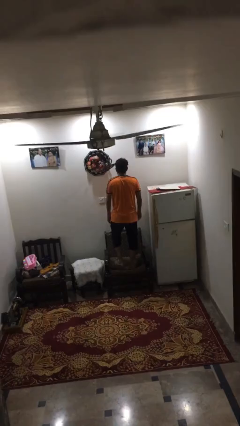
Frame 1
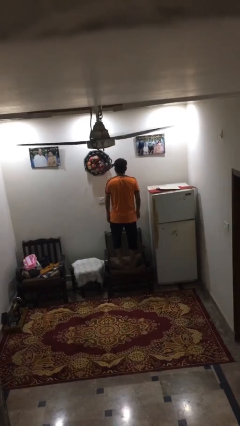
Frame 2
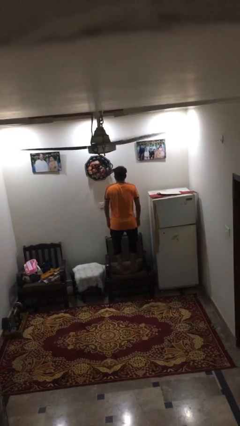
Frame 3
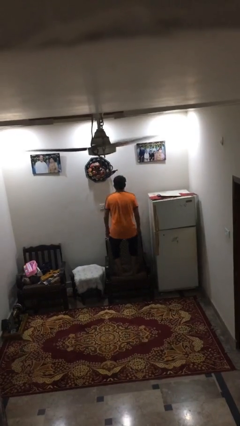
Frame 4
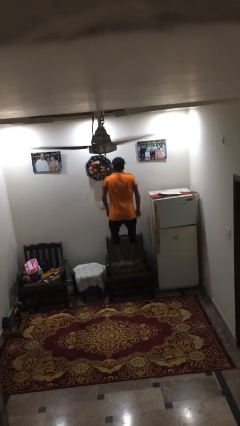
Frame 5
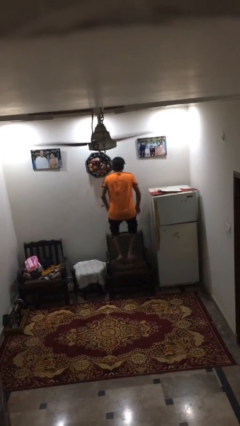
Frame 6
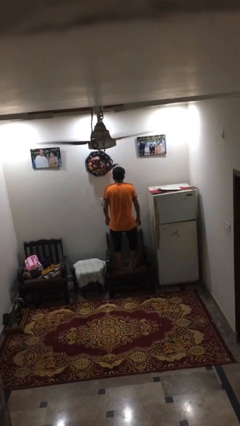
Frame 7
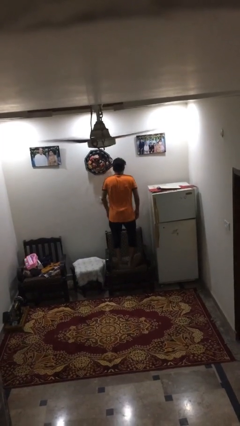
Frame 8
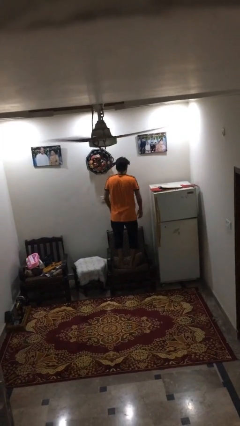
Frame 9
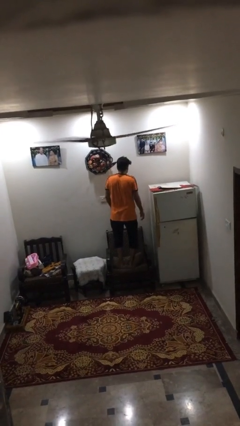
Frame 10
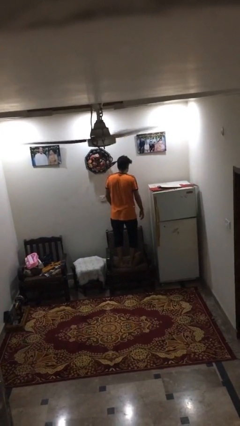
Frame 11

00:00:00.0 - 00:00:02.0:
person jumps on couch

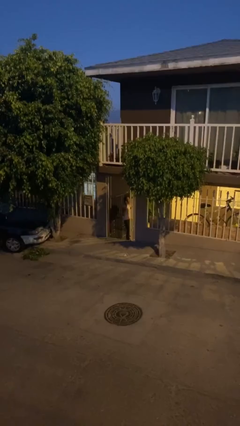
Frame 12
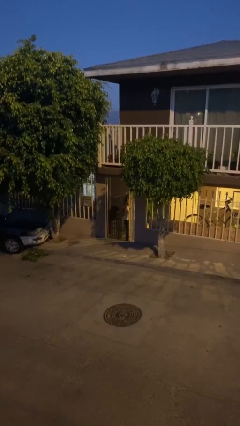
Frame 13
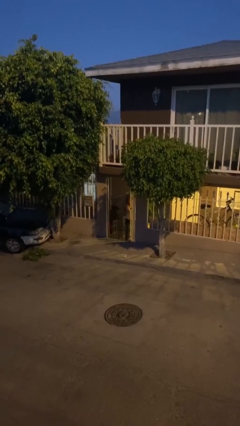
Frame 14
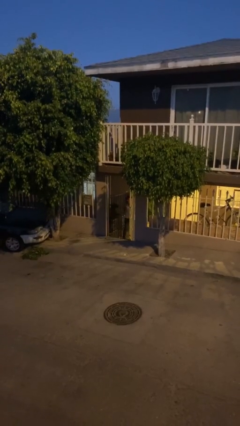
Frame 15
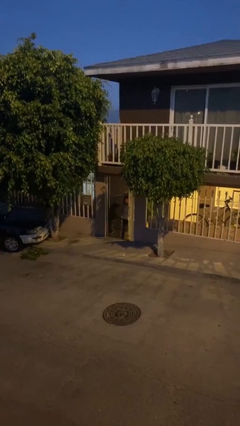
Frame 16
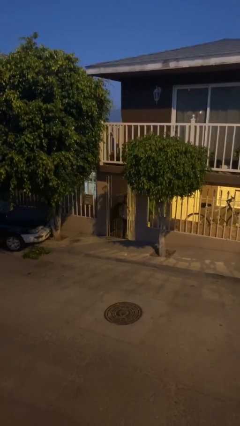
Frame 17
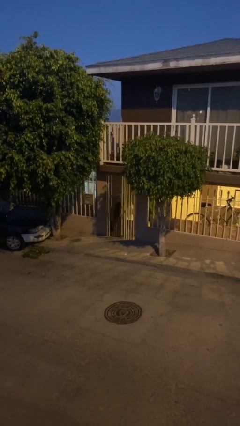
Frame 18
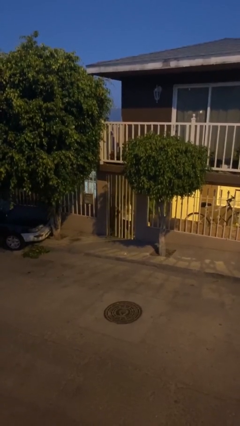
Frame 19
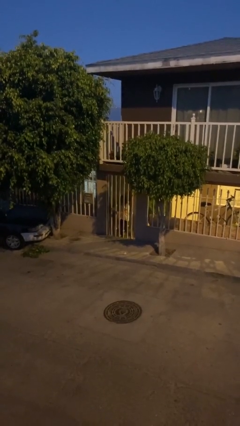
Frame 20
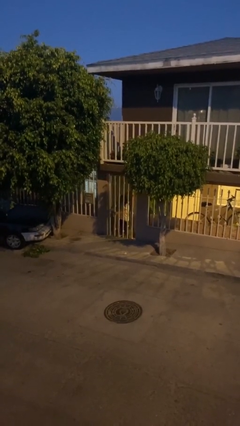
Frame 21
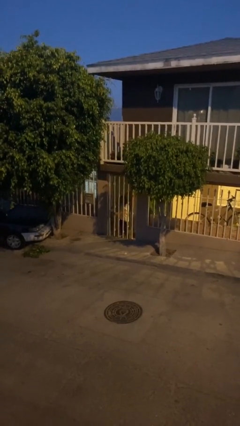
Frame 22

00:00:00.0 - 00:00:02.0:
person closes facility door

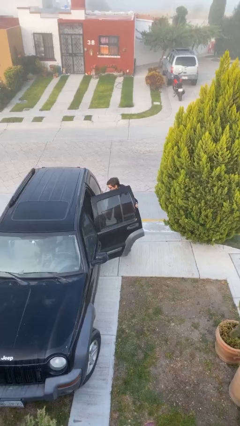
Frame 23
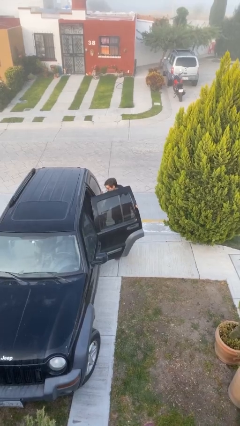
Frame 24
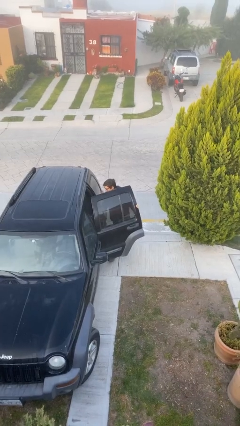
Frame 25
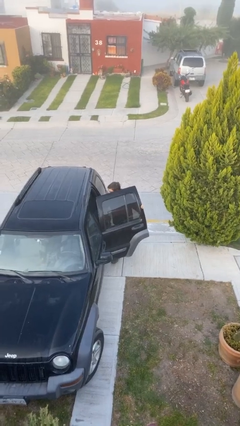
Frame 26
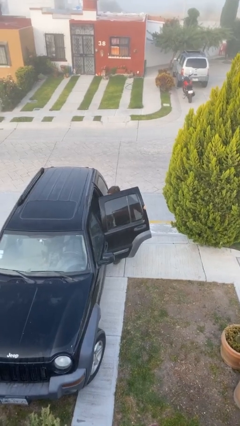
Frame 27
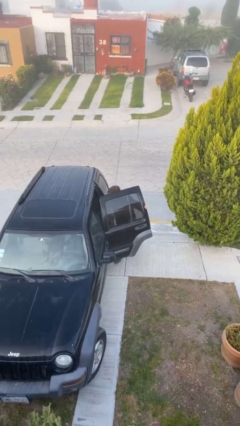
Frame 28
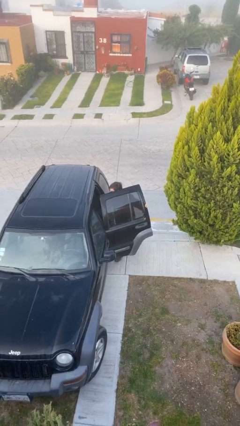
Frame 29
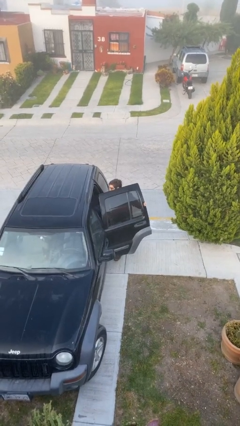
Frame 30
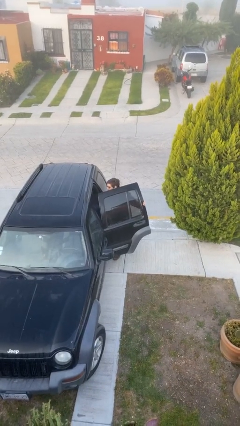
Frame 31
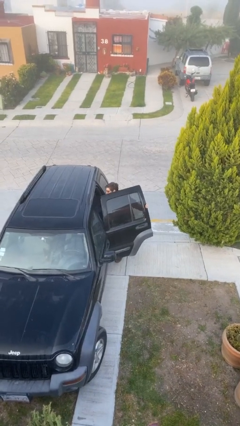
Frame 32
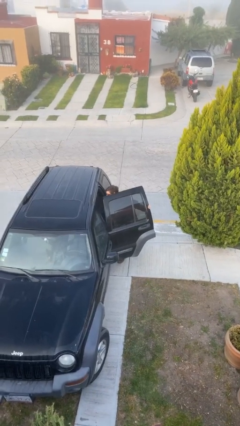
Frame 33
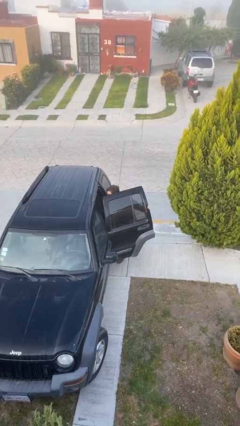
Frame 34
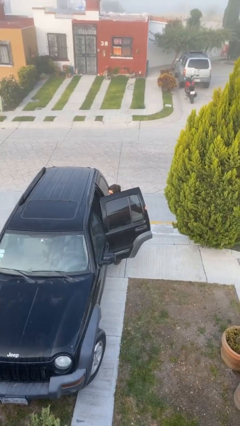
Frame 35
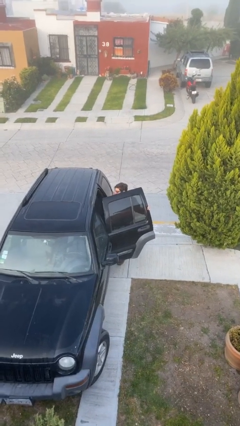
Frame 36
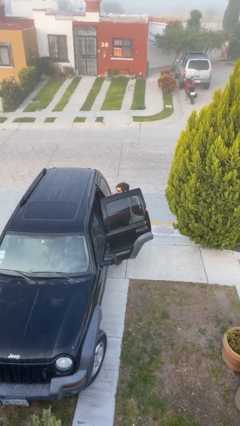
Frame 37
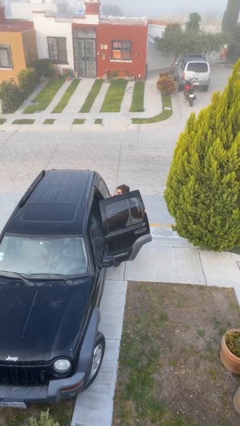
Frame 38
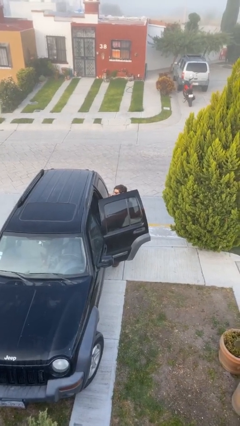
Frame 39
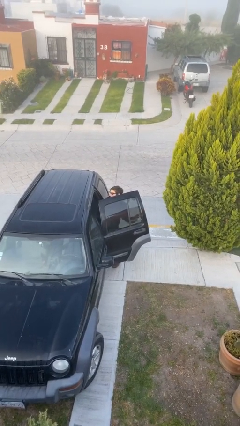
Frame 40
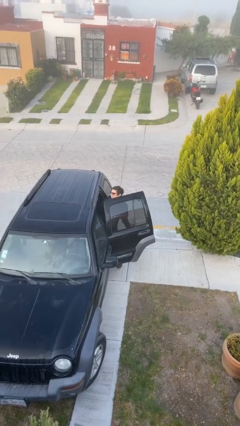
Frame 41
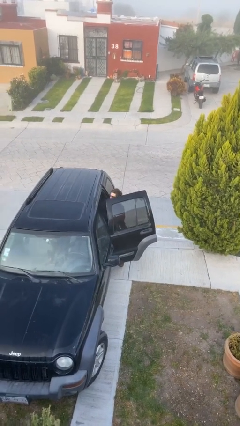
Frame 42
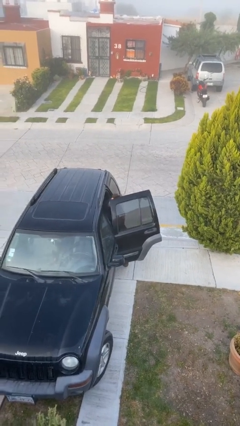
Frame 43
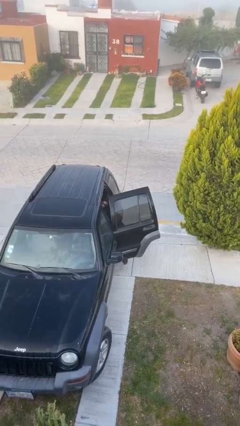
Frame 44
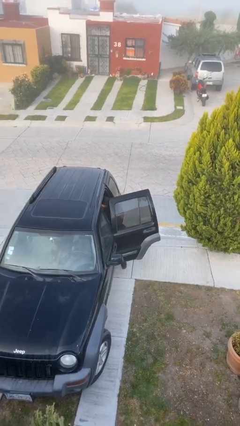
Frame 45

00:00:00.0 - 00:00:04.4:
person enters car

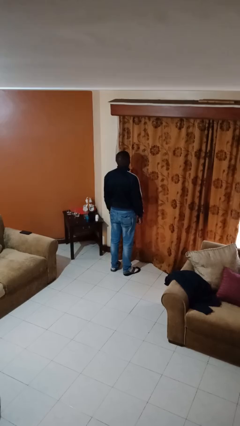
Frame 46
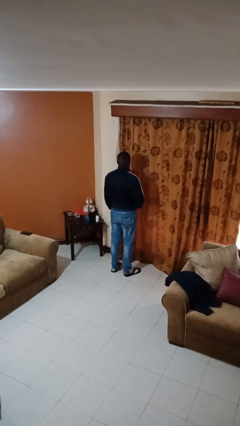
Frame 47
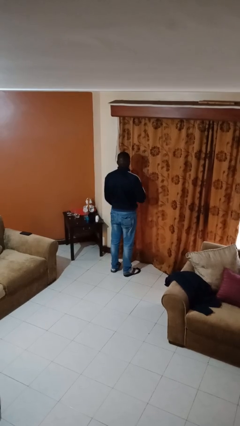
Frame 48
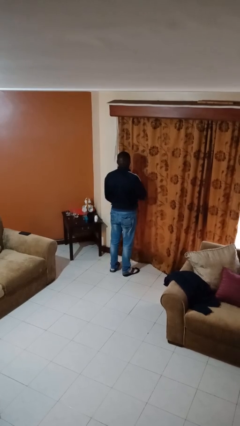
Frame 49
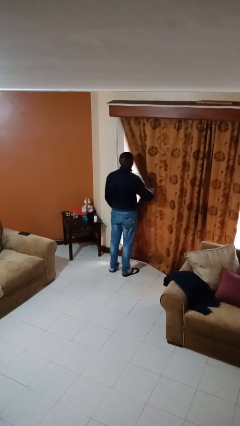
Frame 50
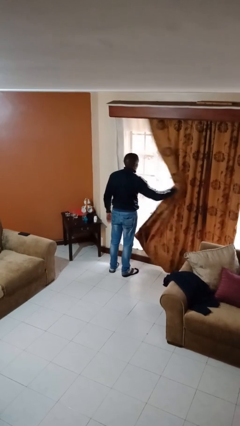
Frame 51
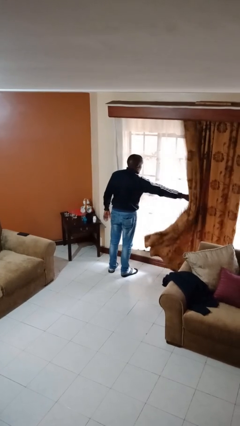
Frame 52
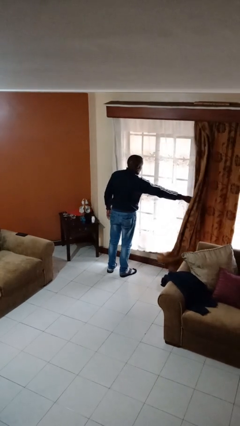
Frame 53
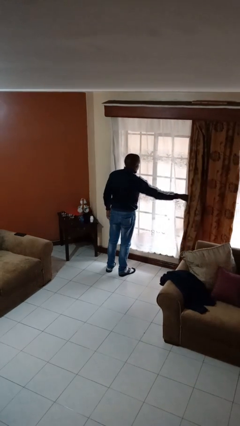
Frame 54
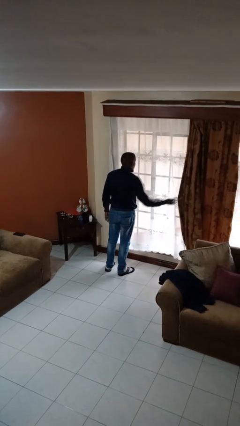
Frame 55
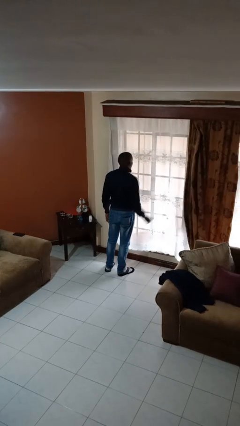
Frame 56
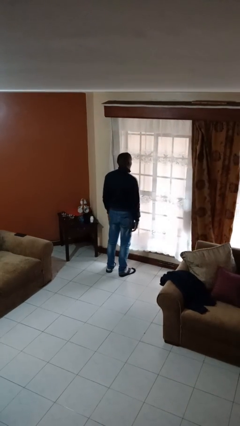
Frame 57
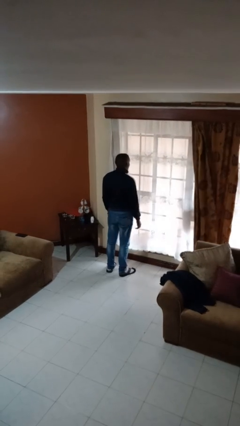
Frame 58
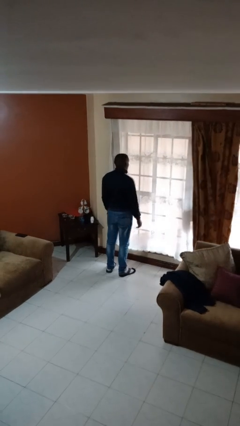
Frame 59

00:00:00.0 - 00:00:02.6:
person opens curtains

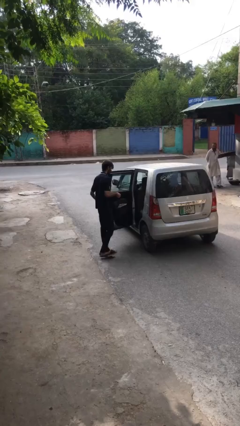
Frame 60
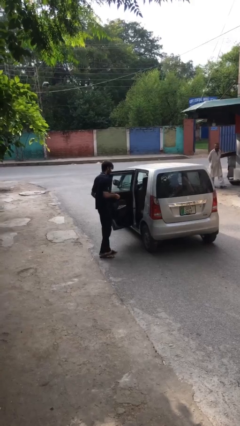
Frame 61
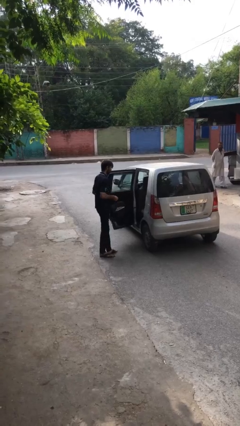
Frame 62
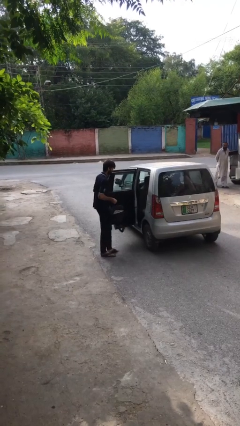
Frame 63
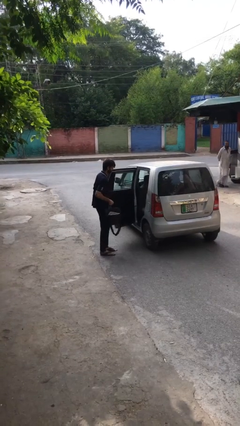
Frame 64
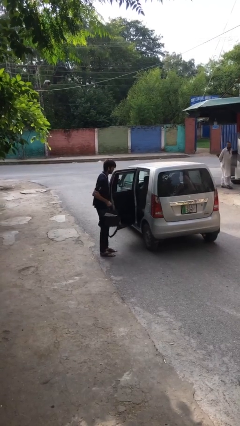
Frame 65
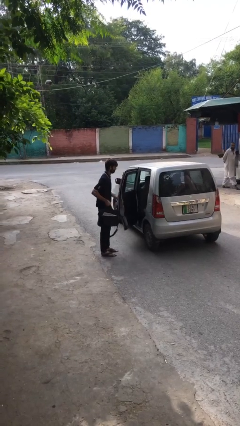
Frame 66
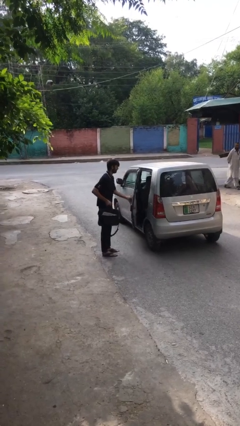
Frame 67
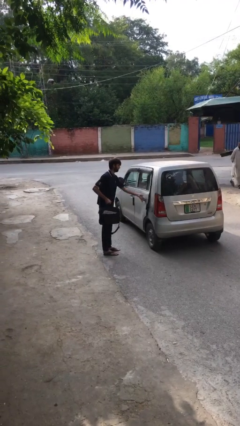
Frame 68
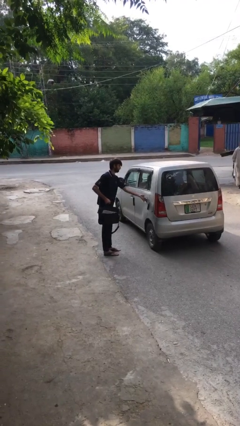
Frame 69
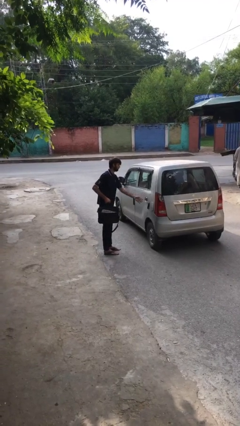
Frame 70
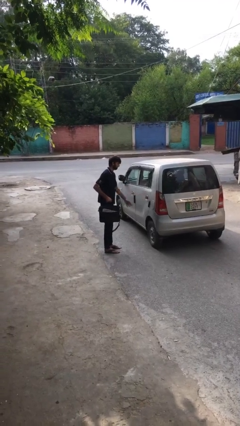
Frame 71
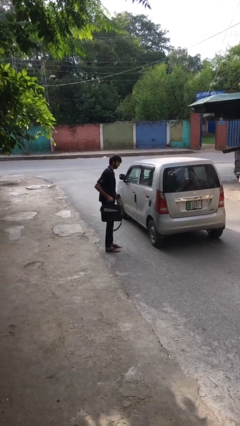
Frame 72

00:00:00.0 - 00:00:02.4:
person closes car door

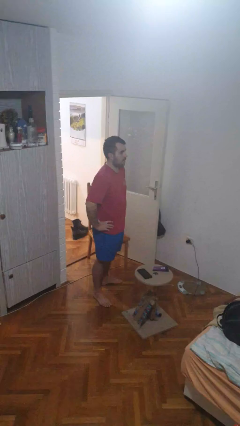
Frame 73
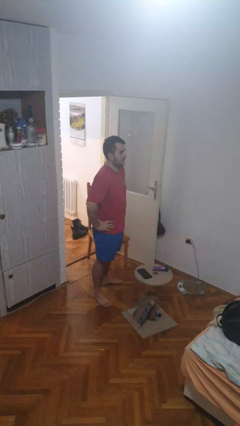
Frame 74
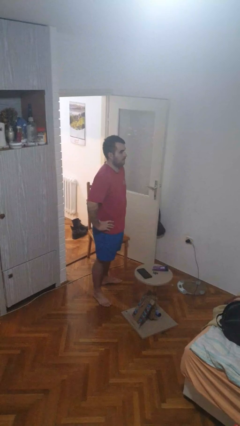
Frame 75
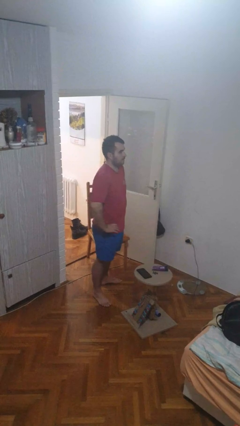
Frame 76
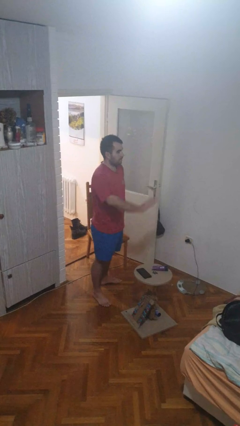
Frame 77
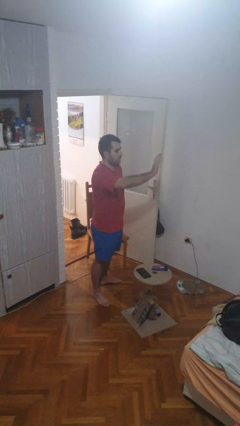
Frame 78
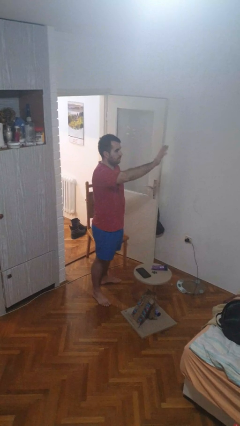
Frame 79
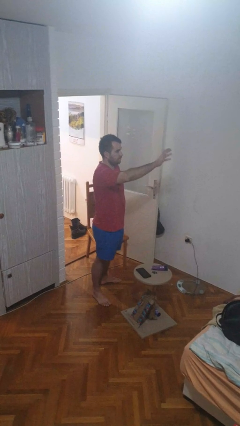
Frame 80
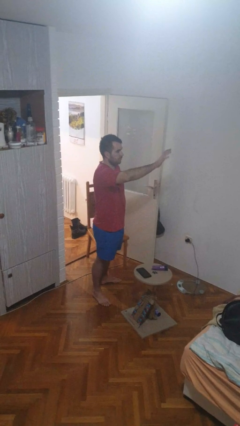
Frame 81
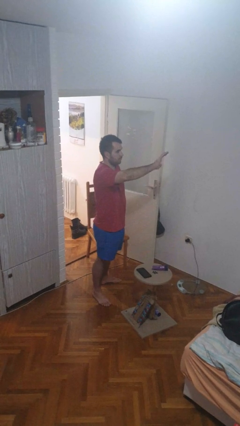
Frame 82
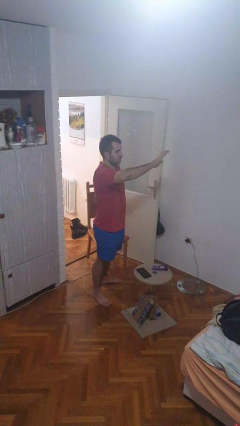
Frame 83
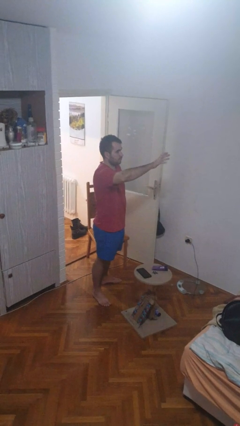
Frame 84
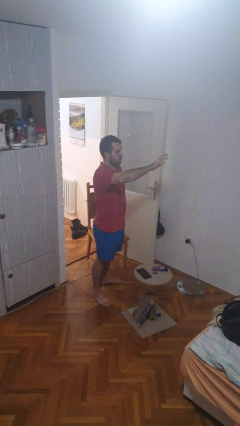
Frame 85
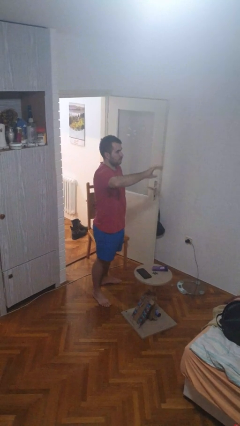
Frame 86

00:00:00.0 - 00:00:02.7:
person waves at person

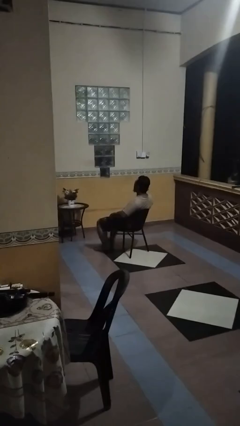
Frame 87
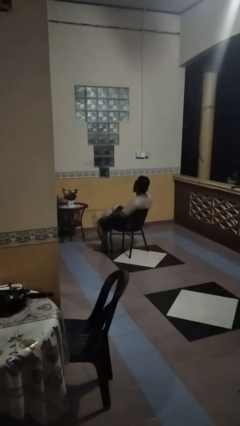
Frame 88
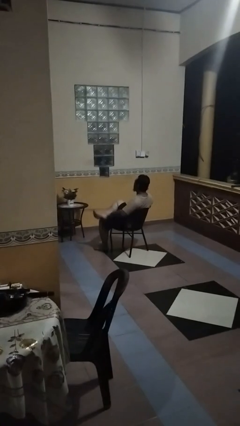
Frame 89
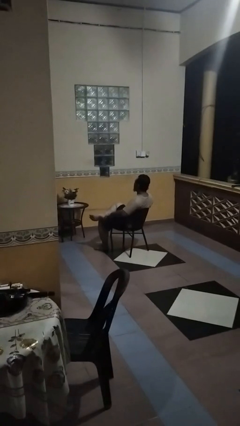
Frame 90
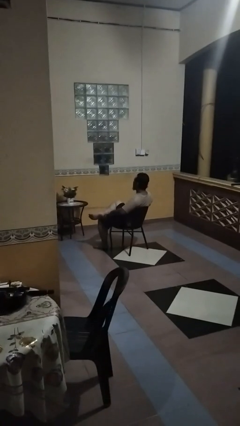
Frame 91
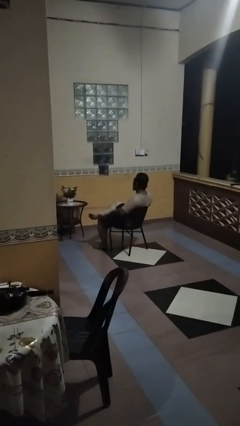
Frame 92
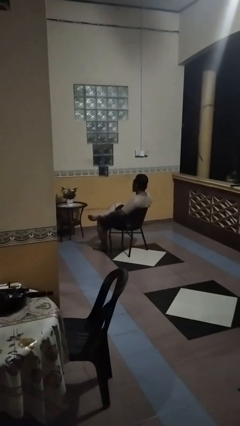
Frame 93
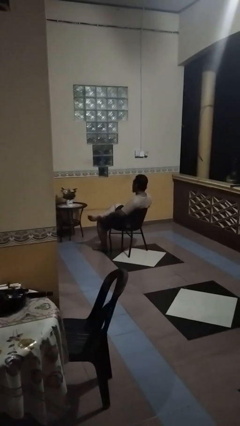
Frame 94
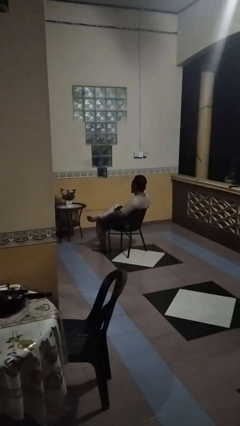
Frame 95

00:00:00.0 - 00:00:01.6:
person crosses legs
